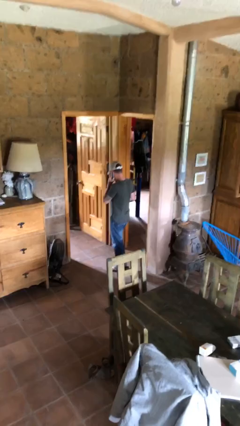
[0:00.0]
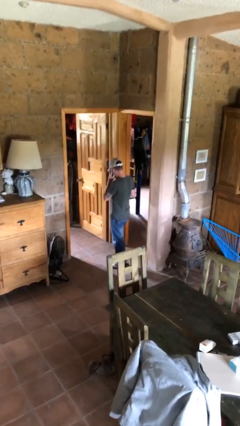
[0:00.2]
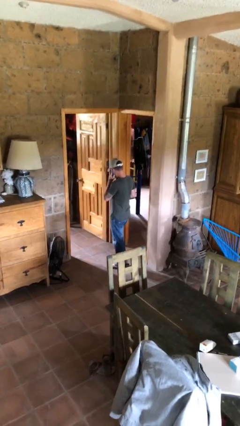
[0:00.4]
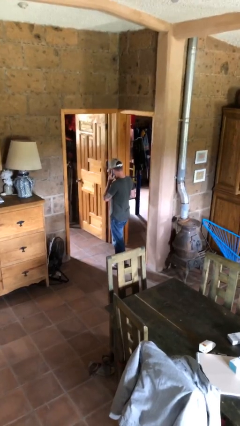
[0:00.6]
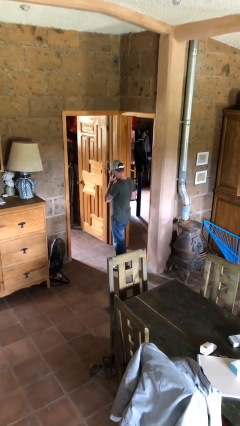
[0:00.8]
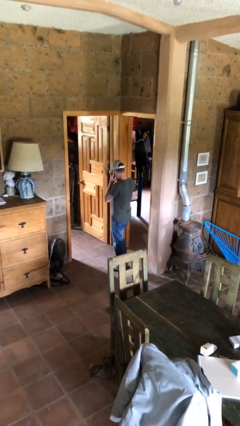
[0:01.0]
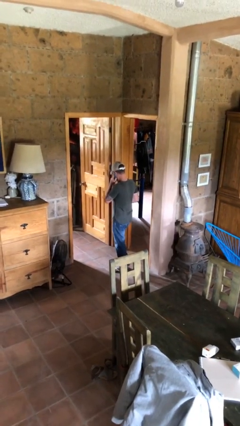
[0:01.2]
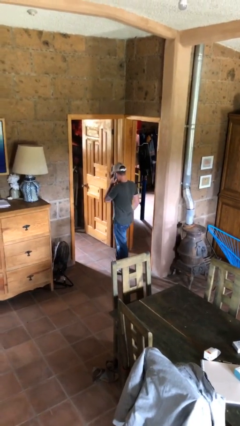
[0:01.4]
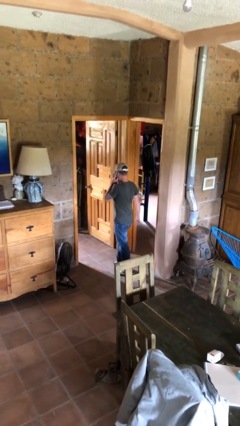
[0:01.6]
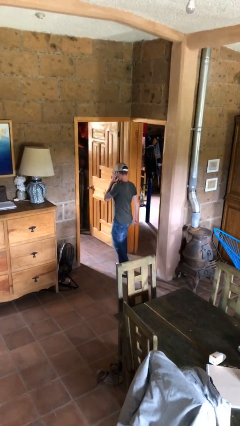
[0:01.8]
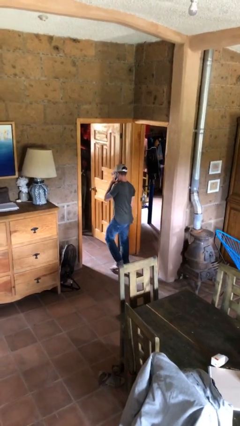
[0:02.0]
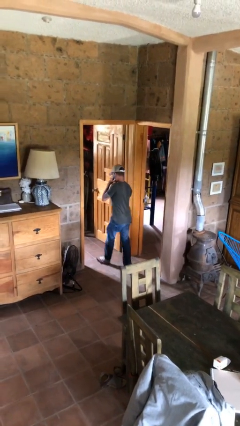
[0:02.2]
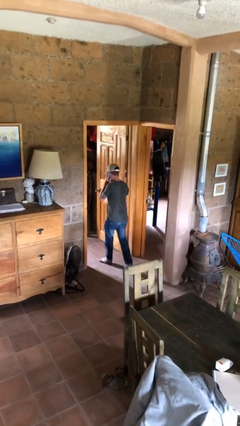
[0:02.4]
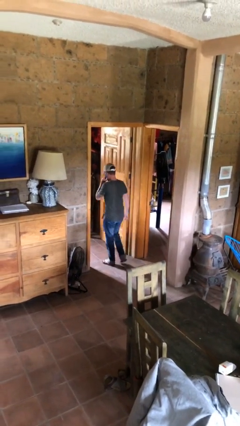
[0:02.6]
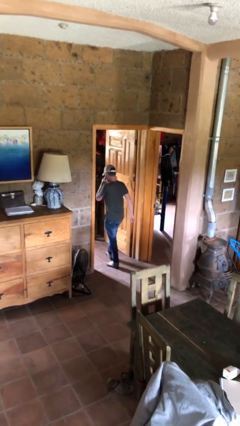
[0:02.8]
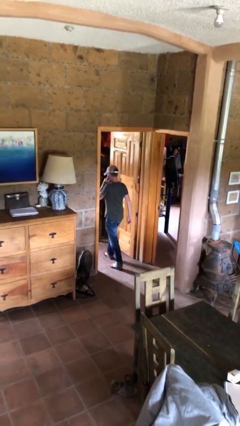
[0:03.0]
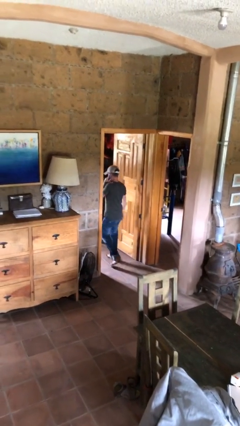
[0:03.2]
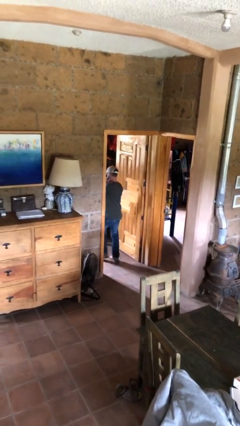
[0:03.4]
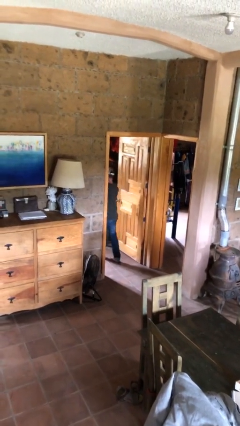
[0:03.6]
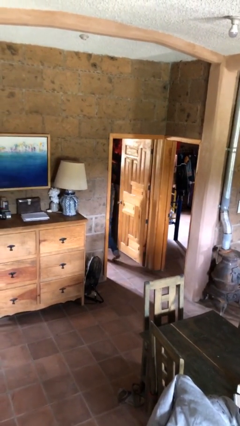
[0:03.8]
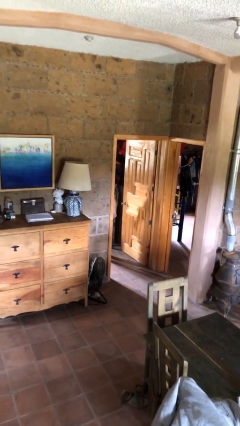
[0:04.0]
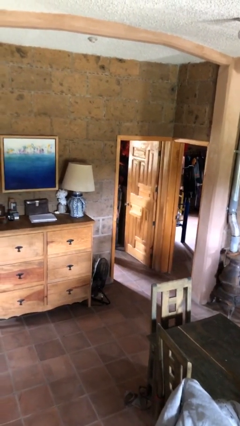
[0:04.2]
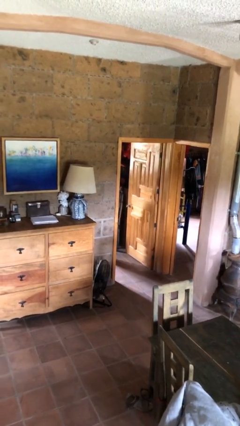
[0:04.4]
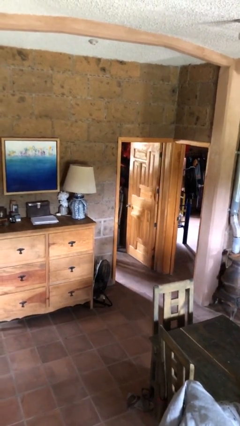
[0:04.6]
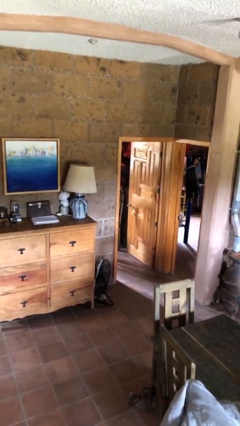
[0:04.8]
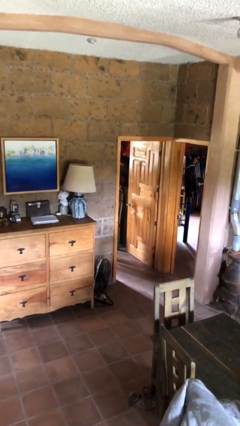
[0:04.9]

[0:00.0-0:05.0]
person exits scene through structure

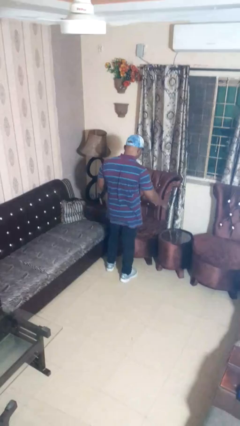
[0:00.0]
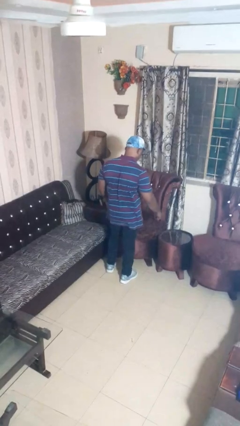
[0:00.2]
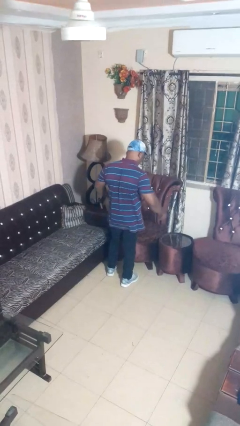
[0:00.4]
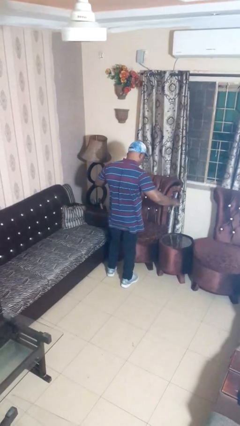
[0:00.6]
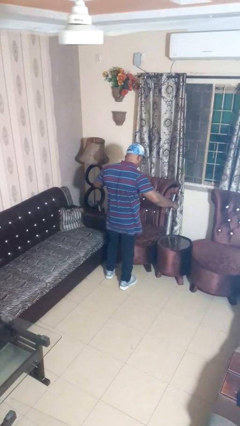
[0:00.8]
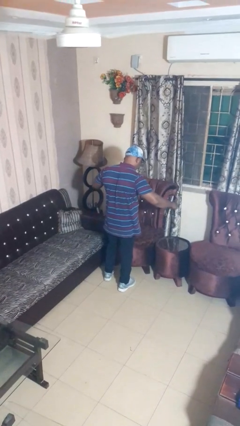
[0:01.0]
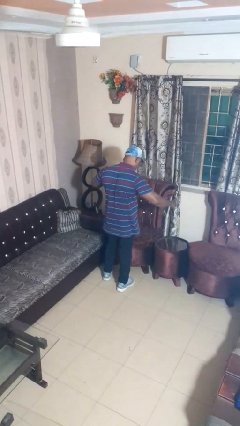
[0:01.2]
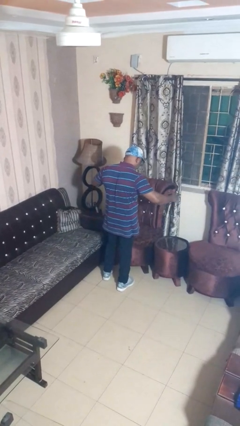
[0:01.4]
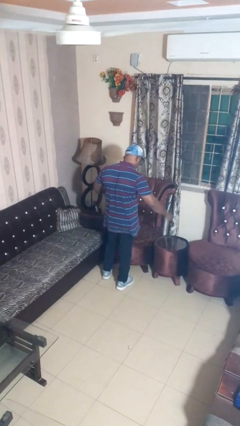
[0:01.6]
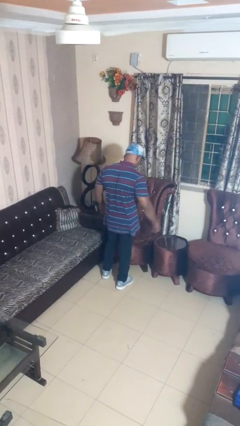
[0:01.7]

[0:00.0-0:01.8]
person snaps fingers

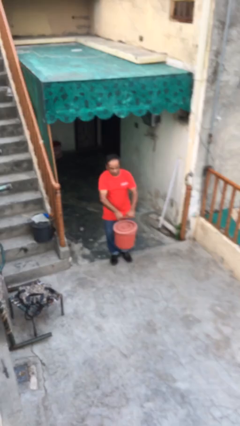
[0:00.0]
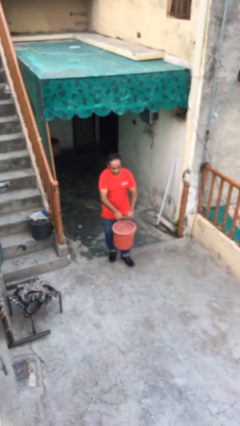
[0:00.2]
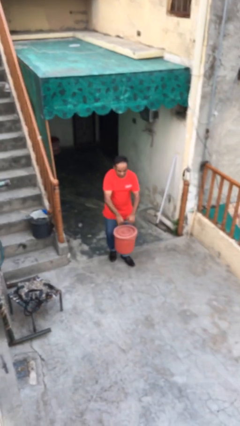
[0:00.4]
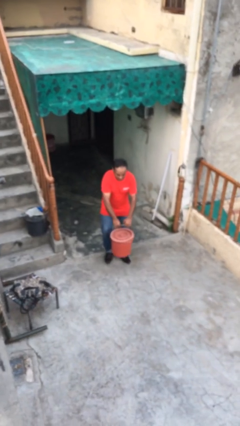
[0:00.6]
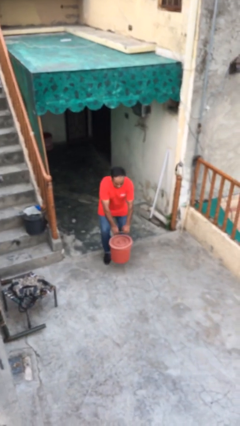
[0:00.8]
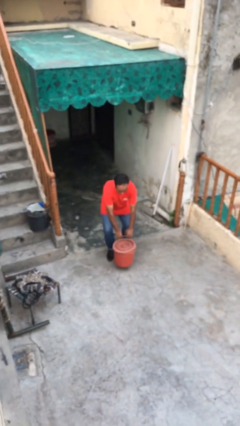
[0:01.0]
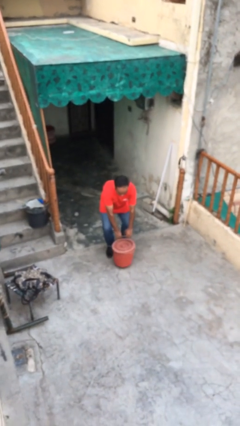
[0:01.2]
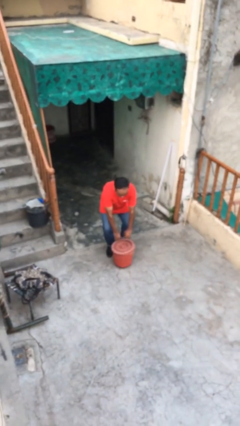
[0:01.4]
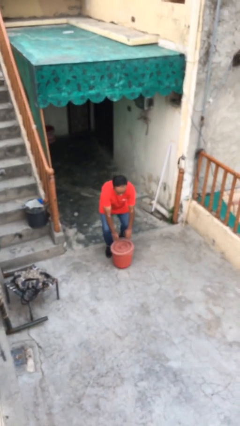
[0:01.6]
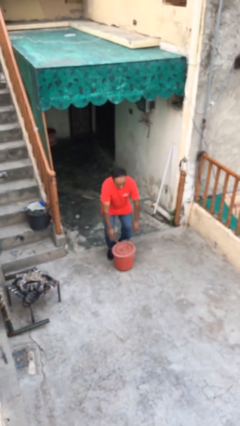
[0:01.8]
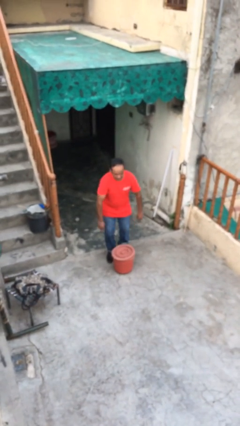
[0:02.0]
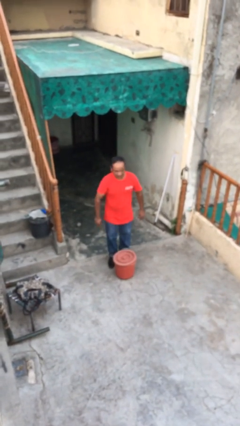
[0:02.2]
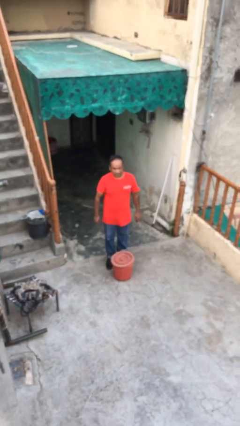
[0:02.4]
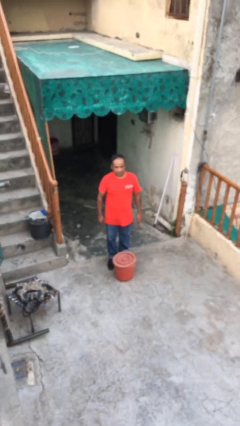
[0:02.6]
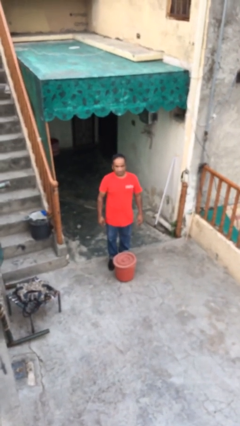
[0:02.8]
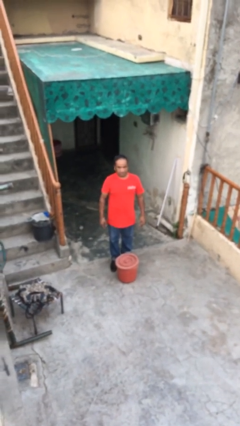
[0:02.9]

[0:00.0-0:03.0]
person puts down object on floor

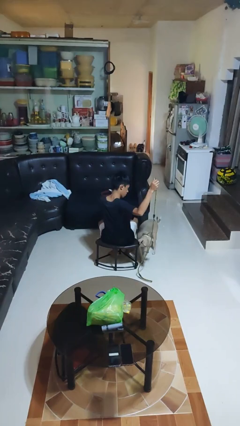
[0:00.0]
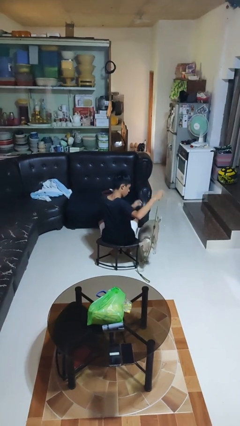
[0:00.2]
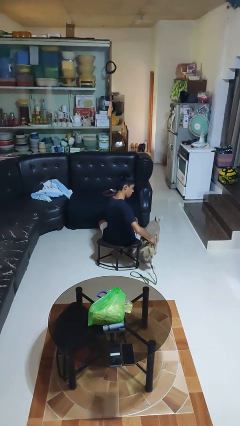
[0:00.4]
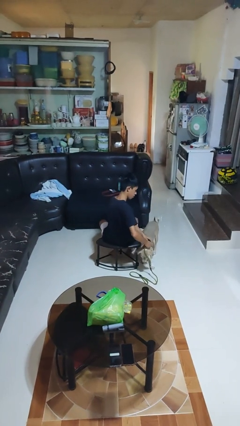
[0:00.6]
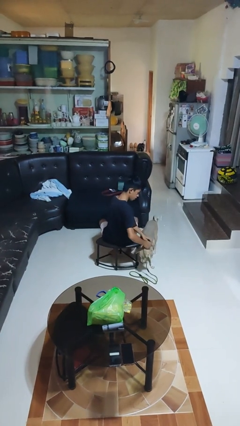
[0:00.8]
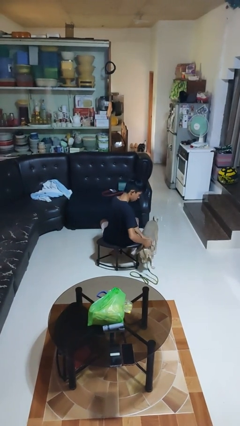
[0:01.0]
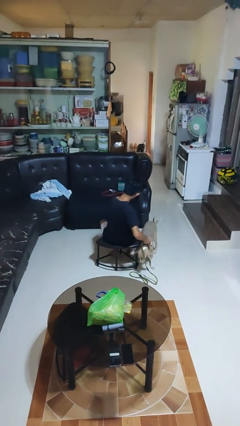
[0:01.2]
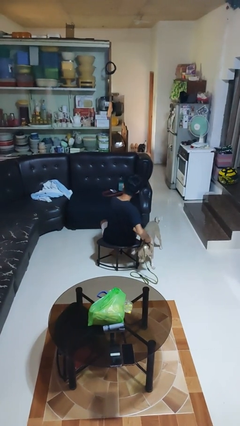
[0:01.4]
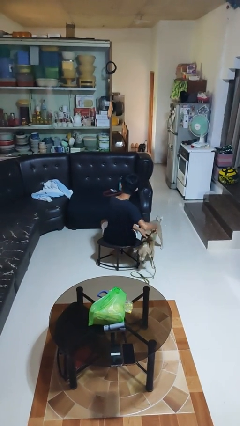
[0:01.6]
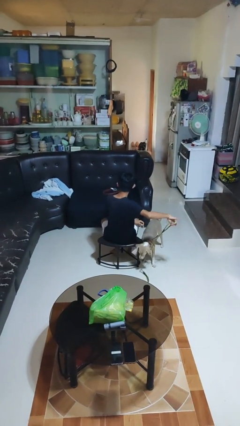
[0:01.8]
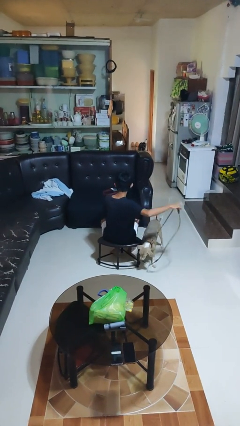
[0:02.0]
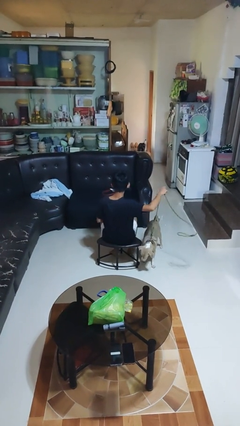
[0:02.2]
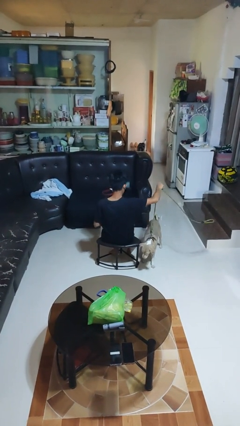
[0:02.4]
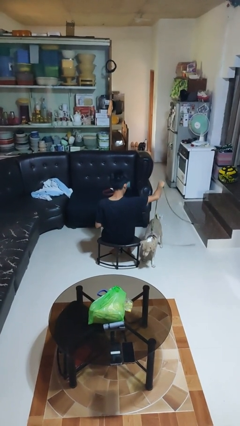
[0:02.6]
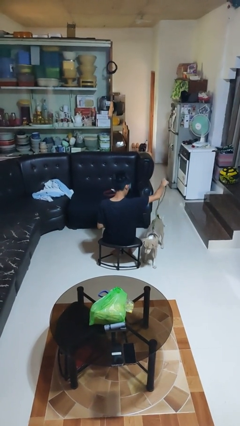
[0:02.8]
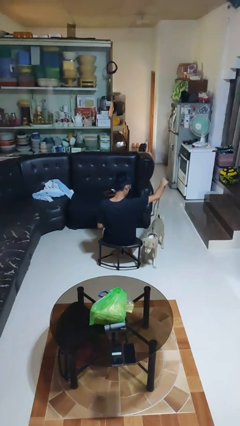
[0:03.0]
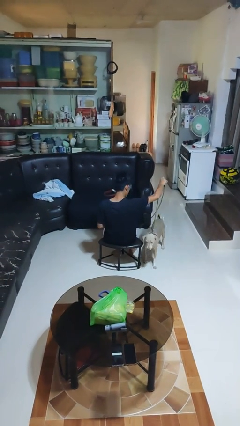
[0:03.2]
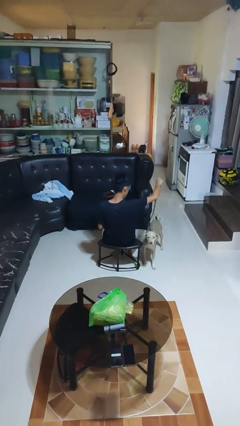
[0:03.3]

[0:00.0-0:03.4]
person attaches leash to dog

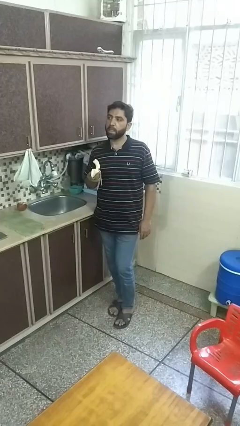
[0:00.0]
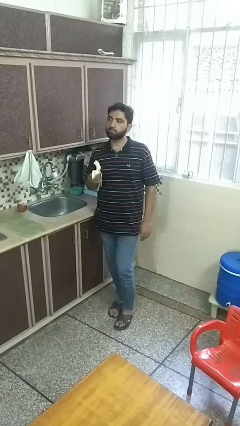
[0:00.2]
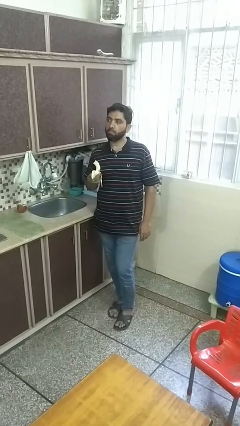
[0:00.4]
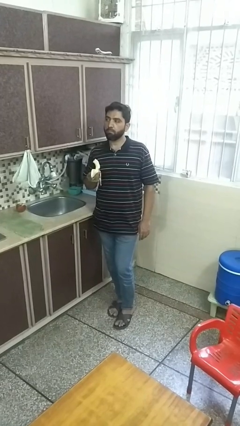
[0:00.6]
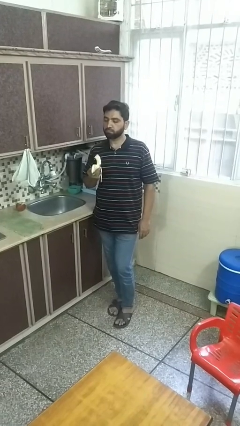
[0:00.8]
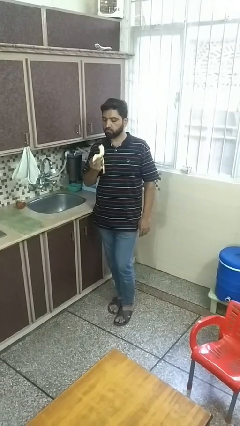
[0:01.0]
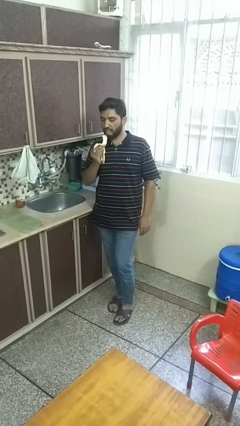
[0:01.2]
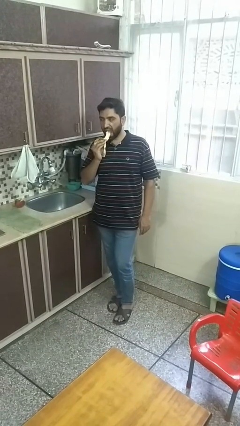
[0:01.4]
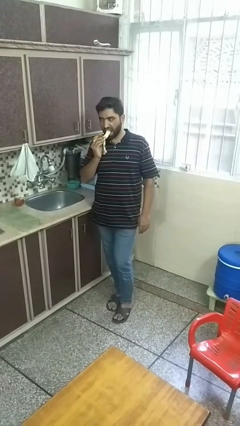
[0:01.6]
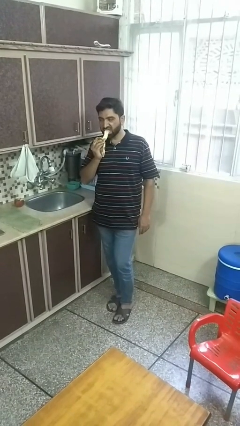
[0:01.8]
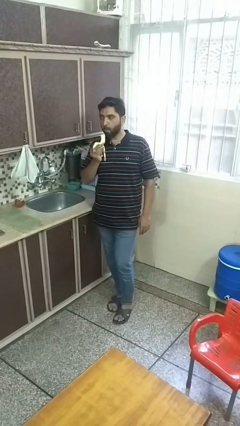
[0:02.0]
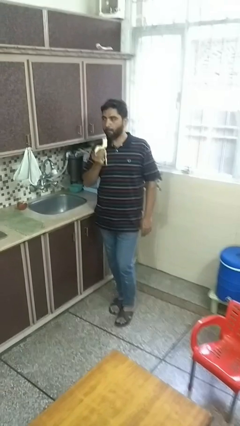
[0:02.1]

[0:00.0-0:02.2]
person eats banana

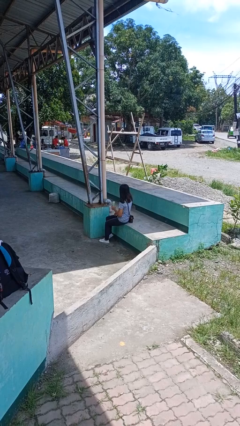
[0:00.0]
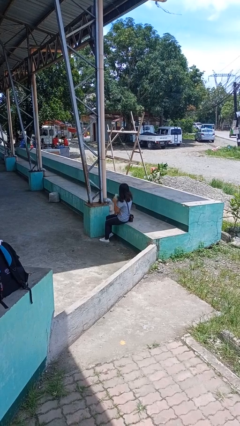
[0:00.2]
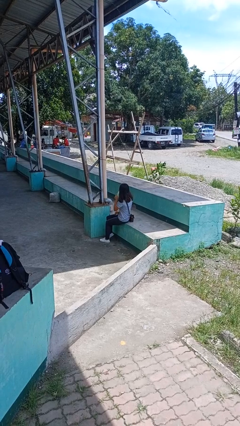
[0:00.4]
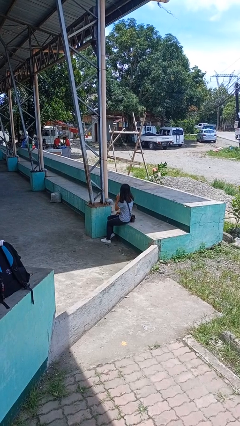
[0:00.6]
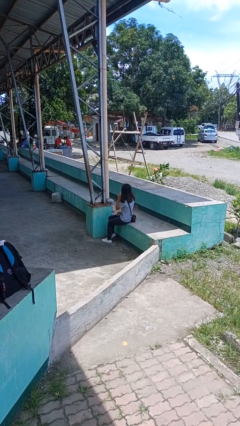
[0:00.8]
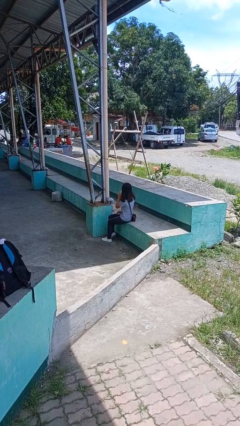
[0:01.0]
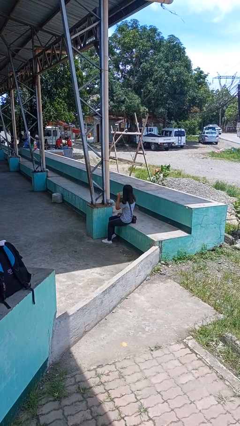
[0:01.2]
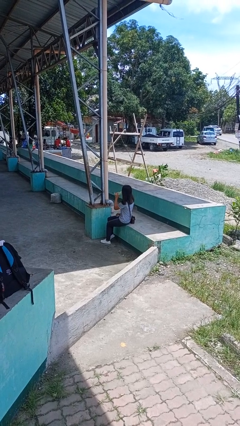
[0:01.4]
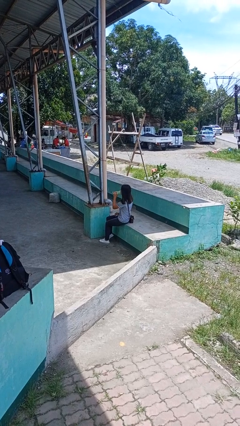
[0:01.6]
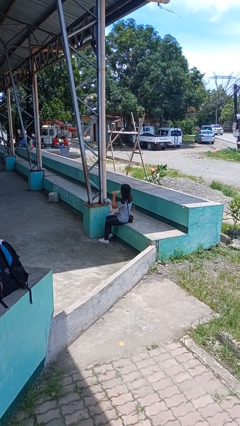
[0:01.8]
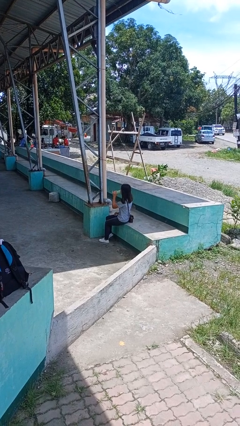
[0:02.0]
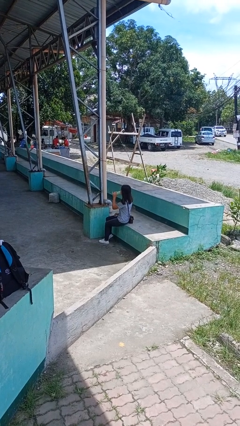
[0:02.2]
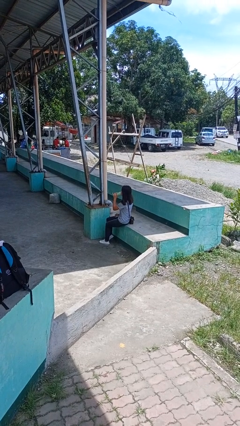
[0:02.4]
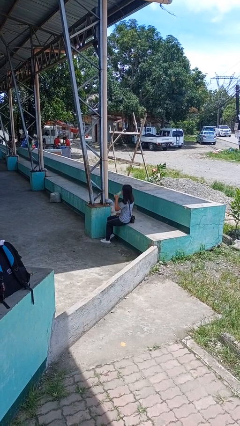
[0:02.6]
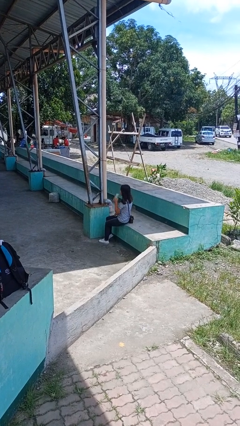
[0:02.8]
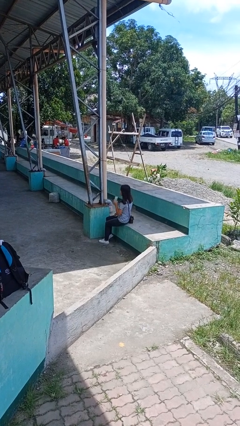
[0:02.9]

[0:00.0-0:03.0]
person drinks from bottle
